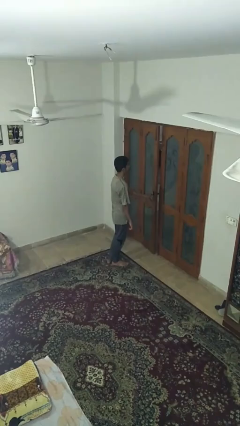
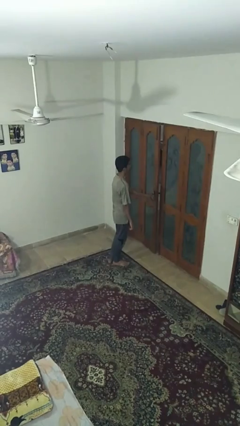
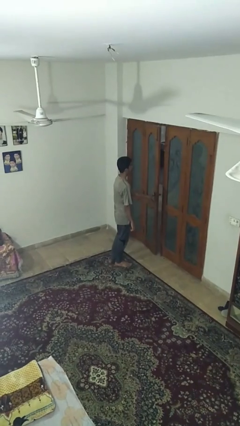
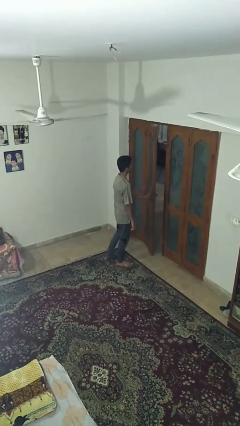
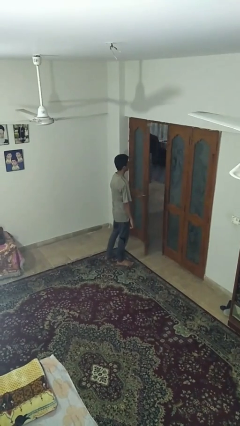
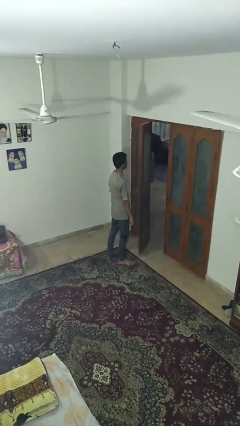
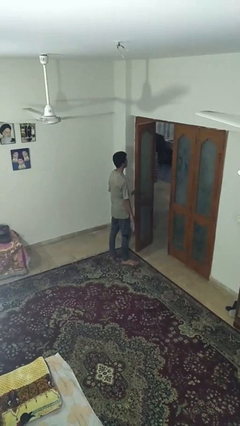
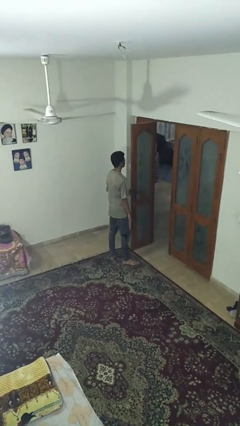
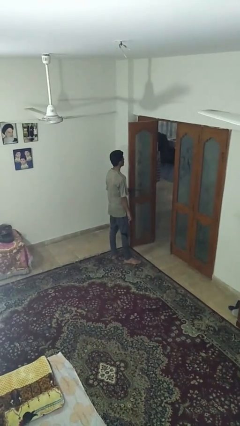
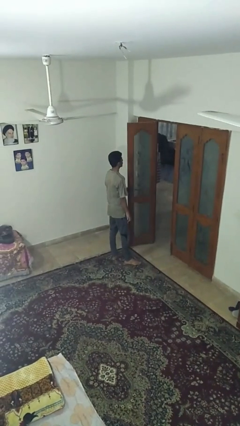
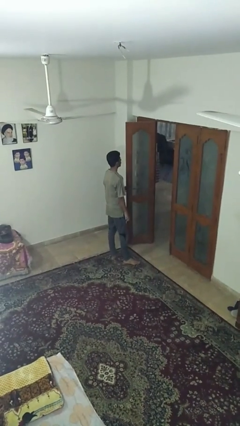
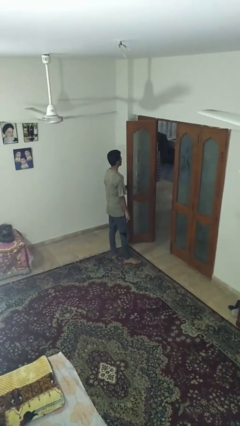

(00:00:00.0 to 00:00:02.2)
person opens facility door

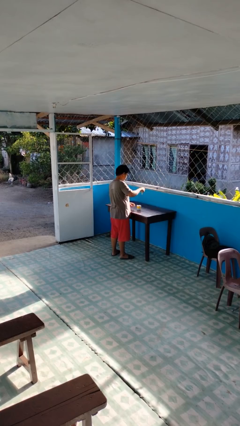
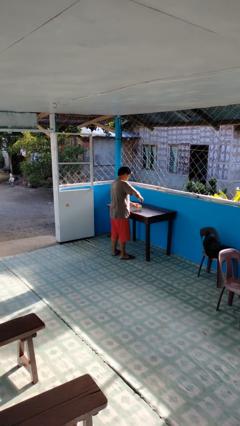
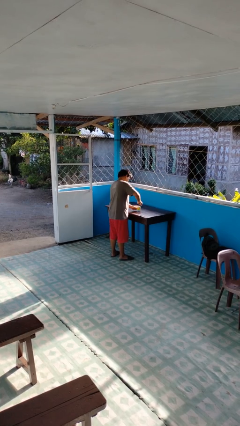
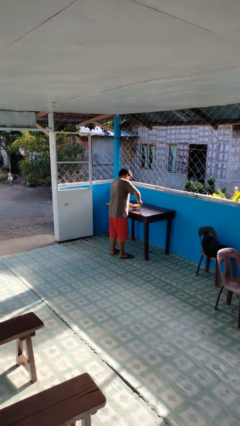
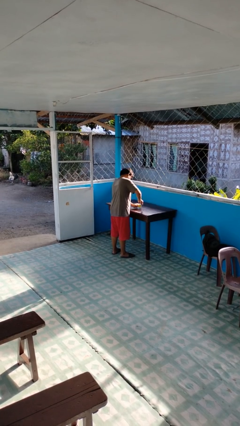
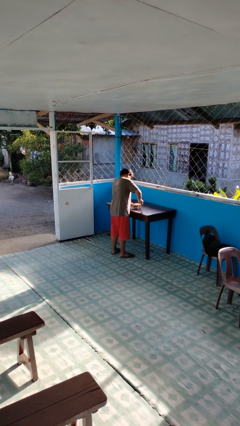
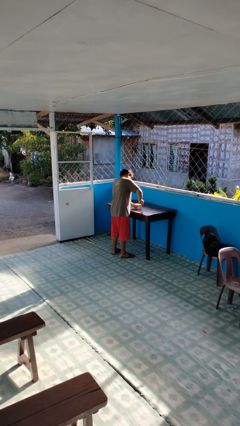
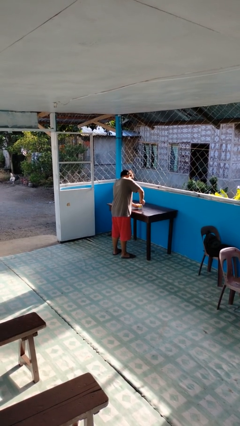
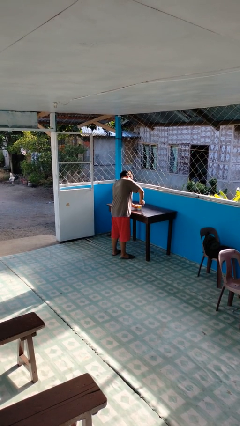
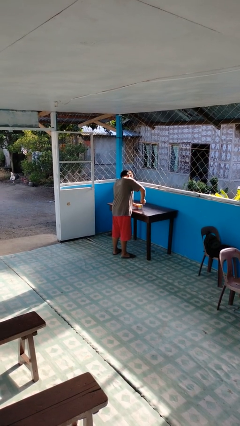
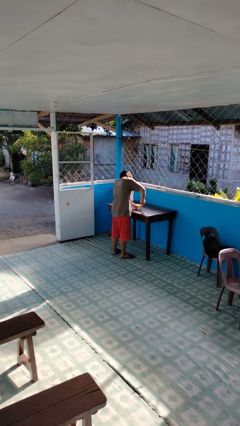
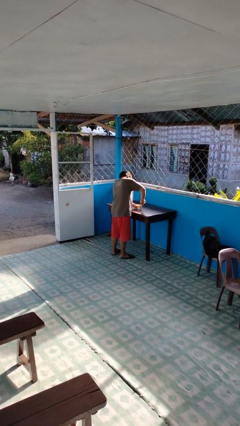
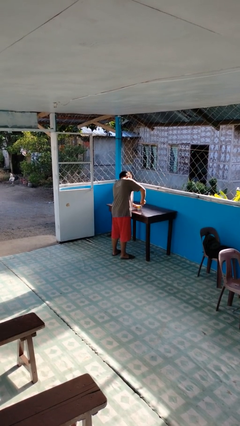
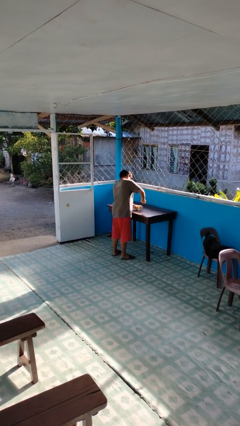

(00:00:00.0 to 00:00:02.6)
person opens can with can opener

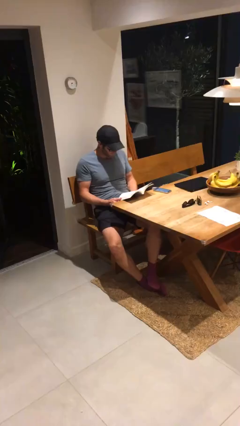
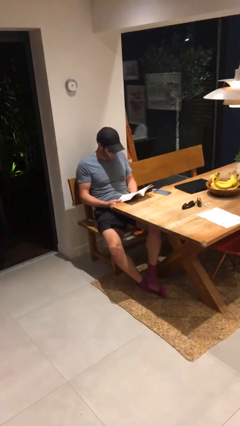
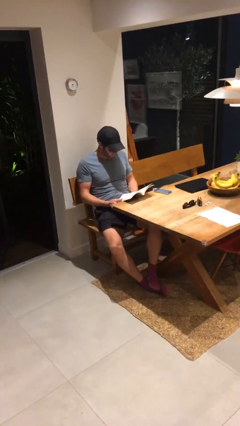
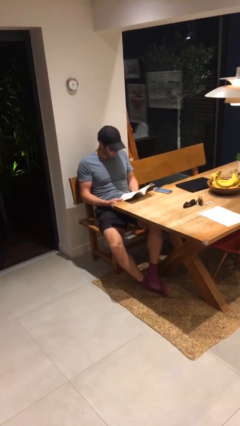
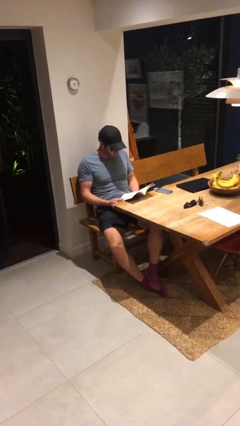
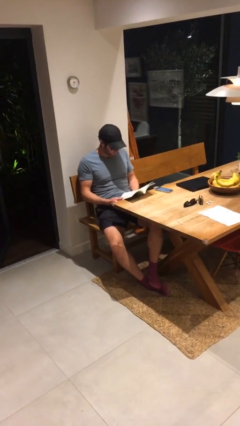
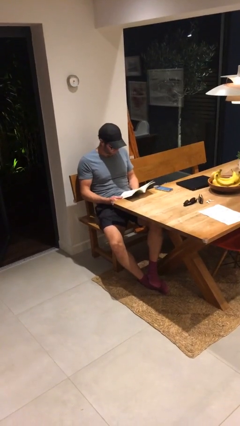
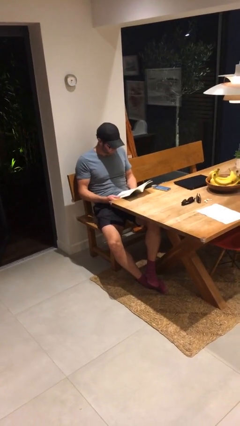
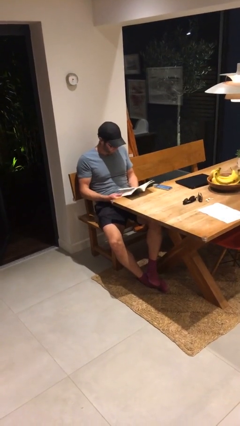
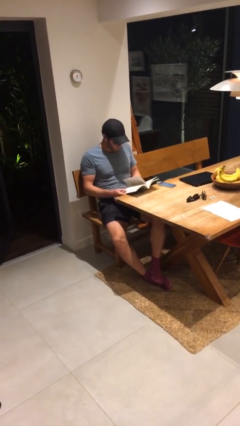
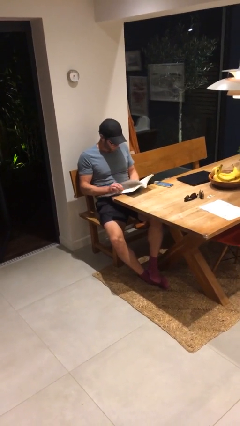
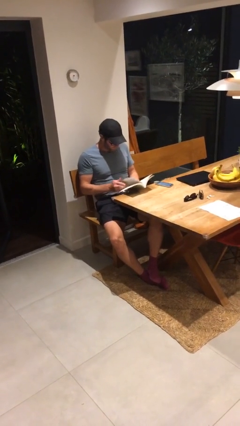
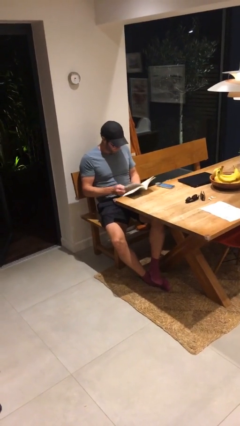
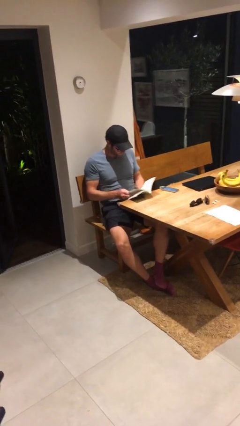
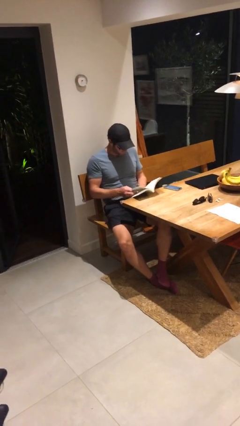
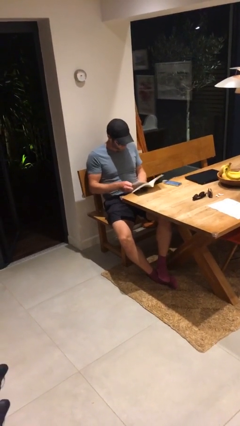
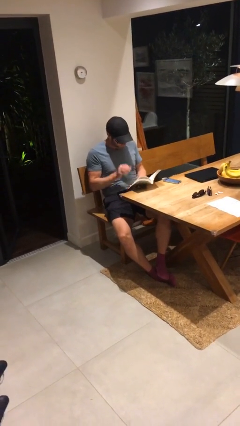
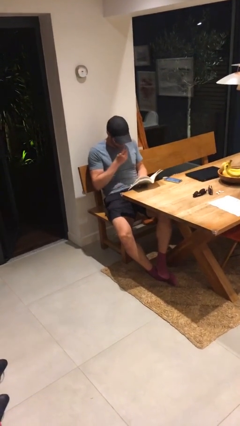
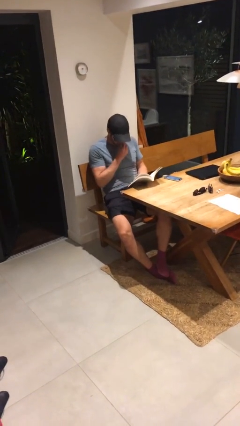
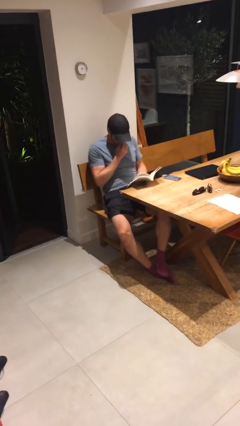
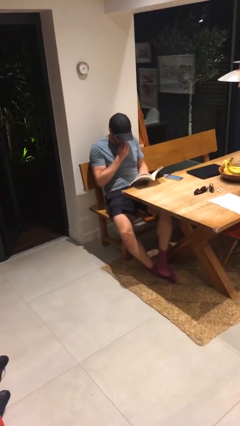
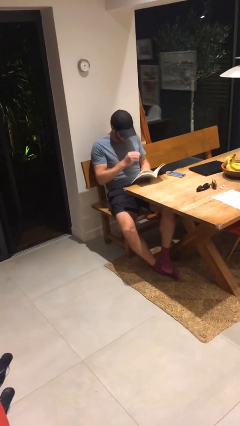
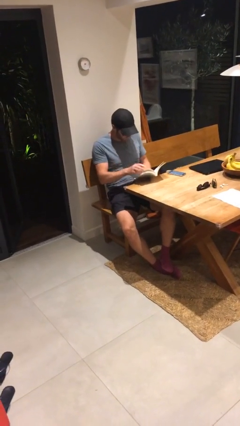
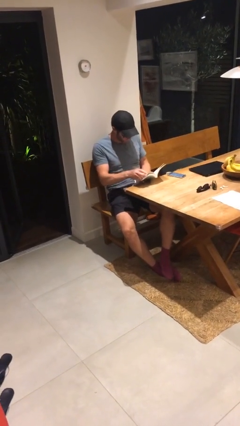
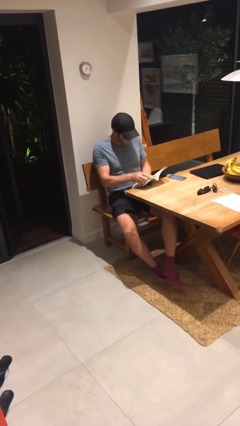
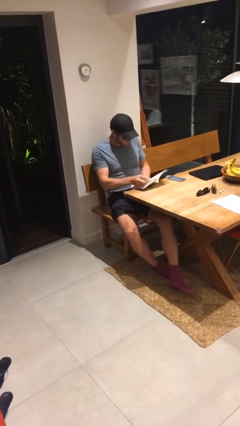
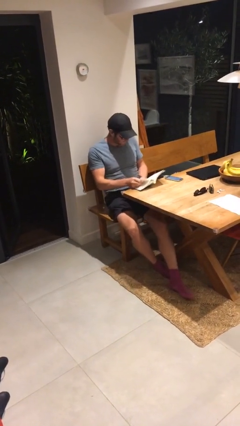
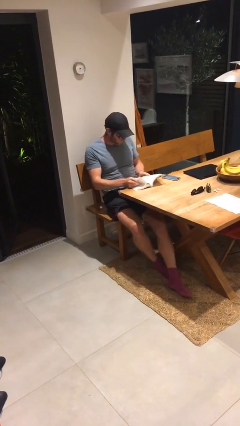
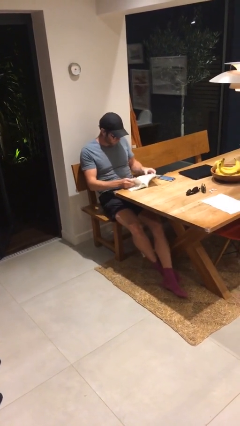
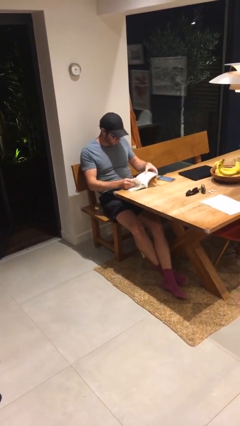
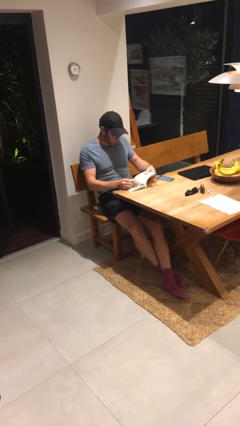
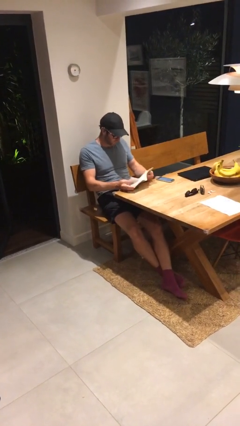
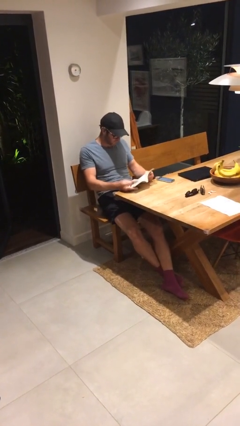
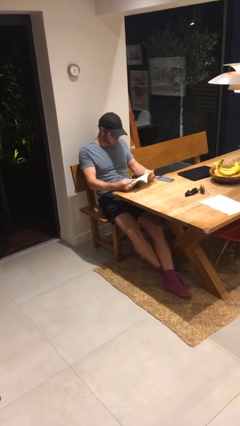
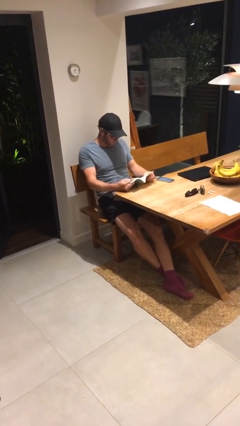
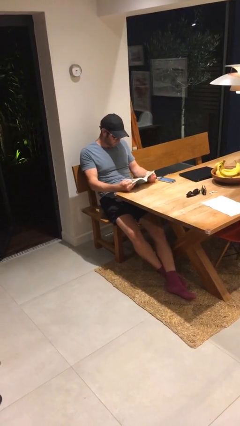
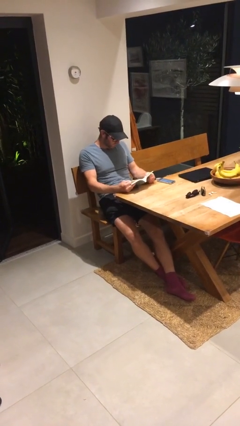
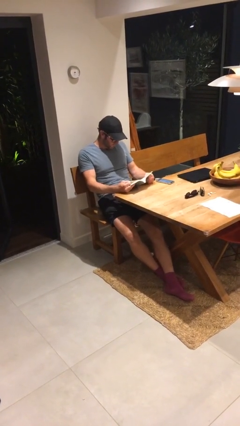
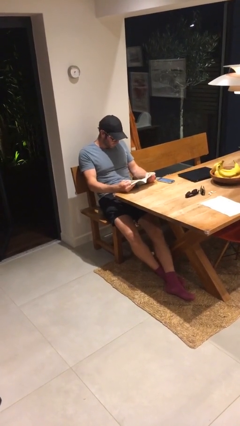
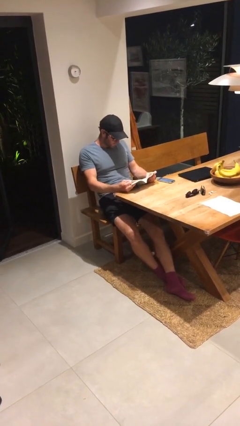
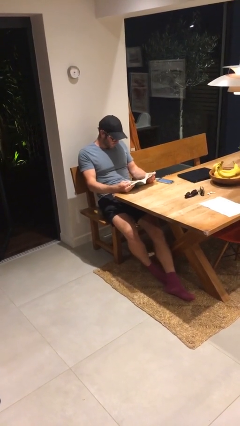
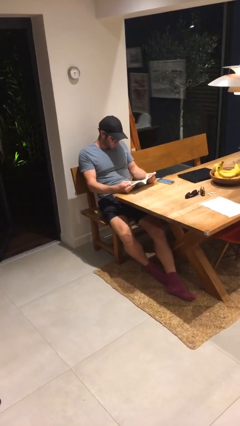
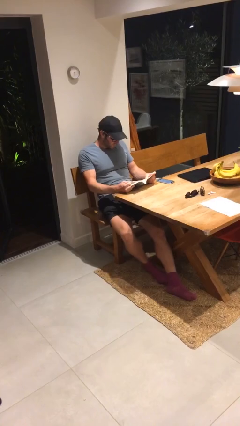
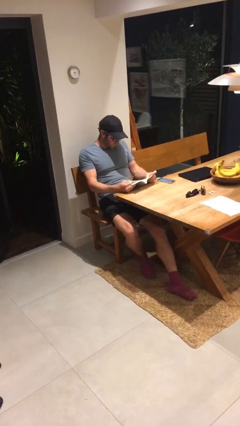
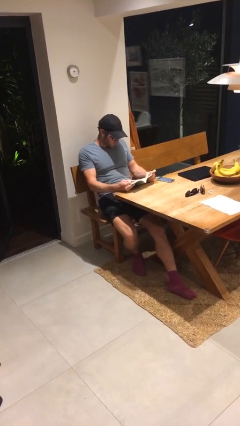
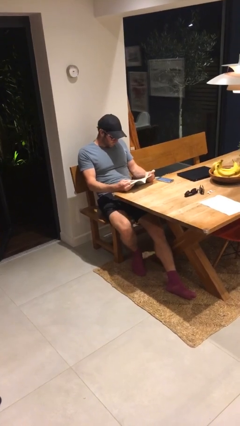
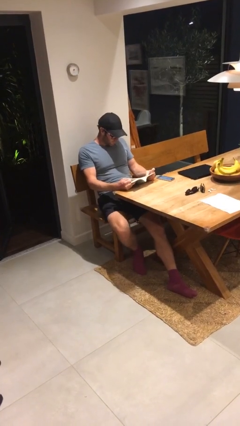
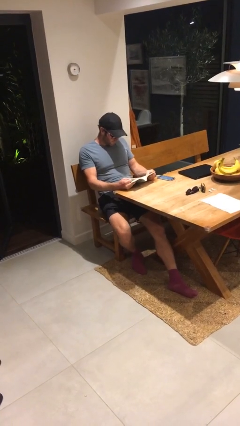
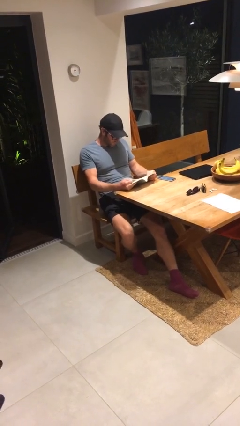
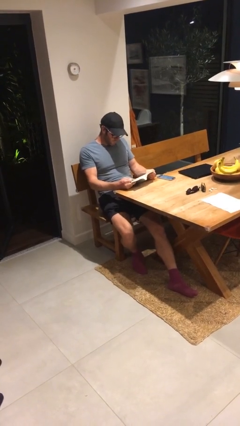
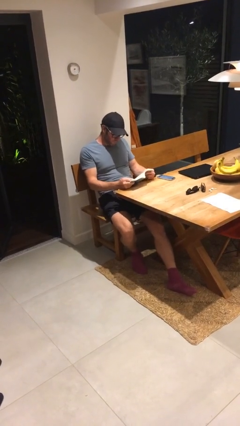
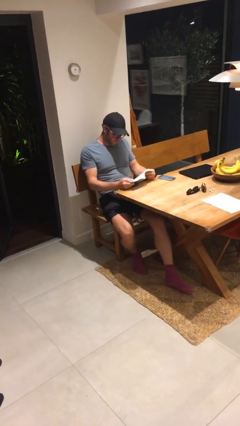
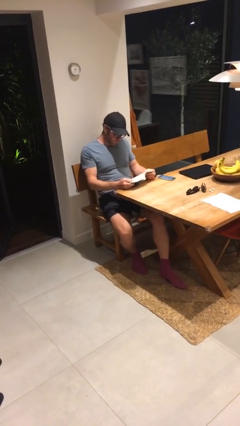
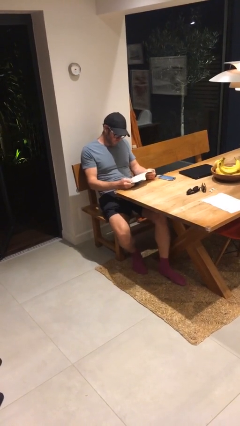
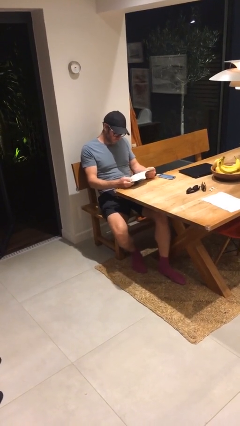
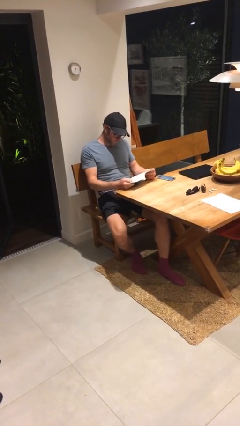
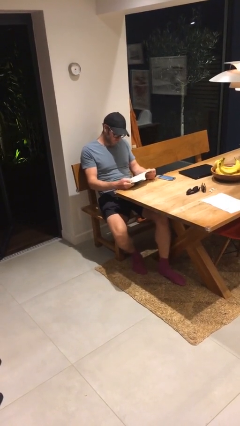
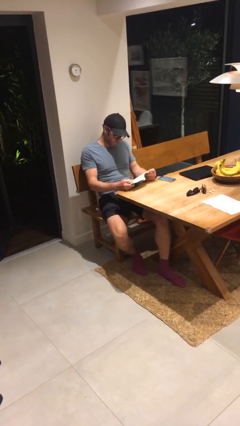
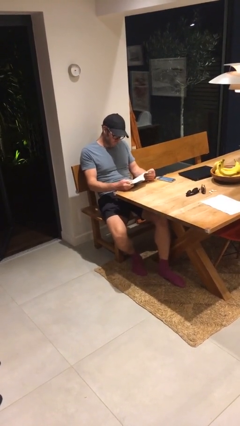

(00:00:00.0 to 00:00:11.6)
person reads document

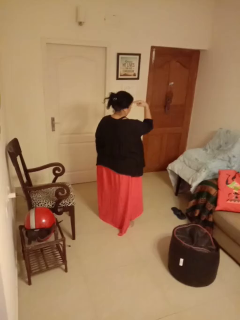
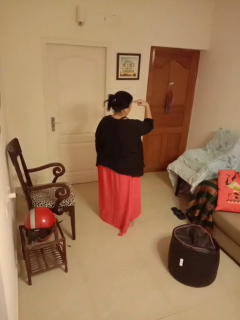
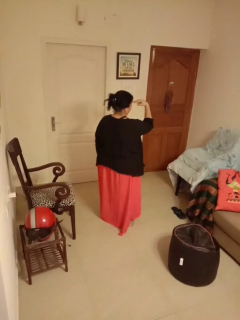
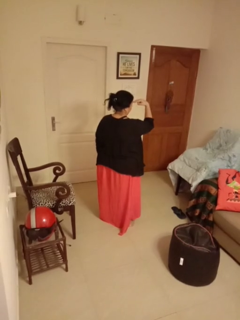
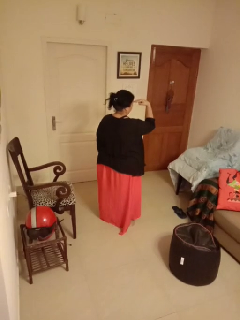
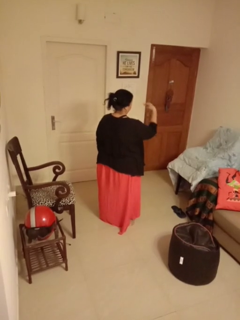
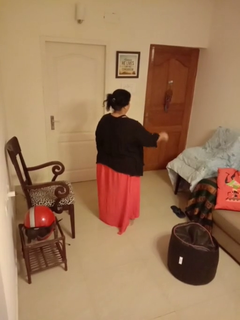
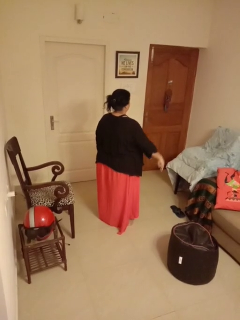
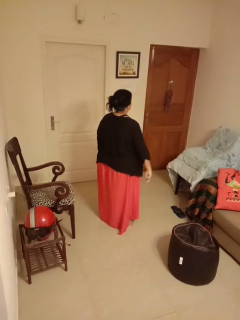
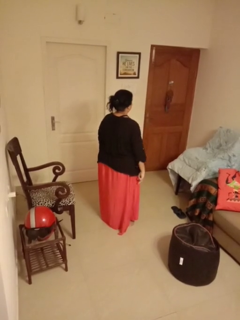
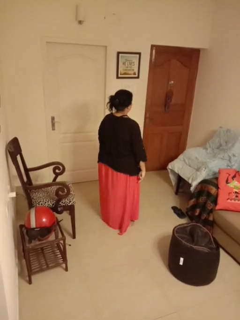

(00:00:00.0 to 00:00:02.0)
person gestures watch closely
